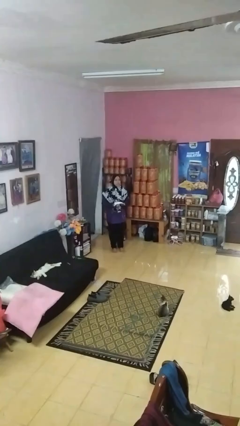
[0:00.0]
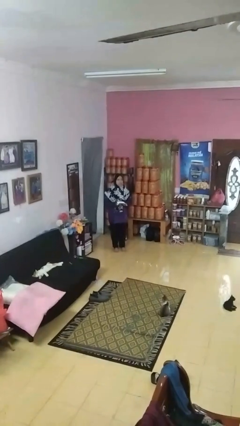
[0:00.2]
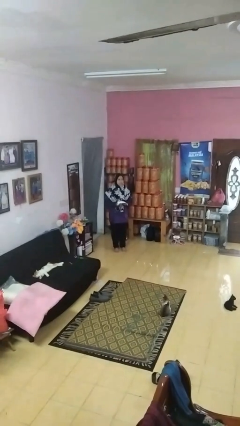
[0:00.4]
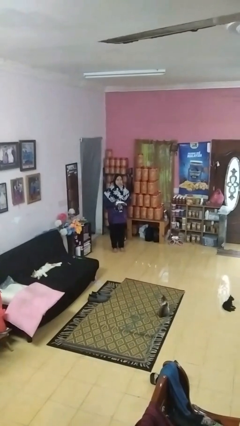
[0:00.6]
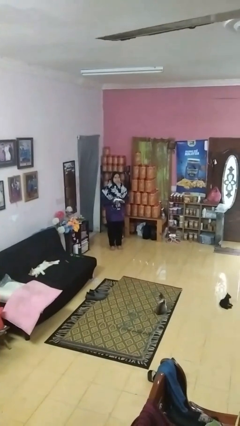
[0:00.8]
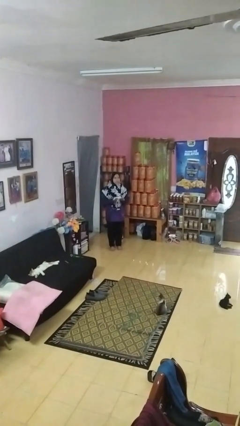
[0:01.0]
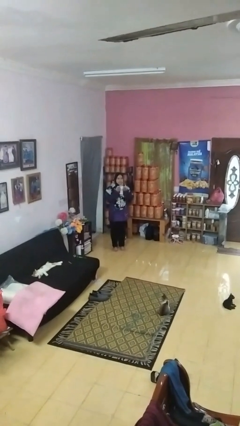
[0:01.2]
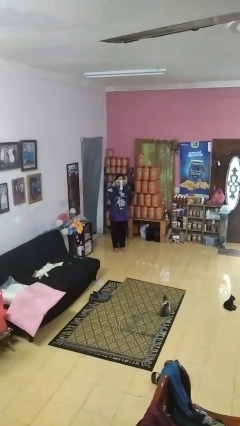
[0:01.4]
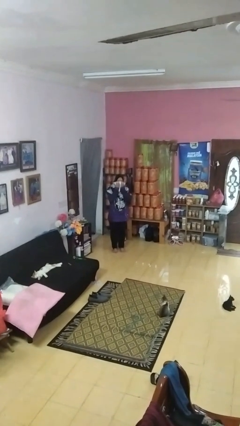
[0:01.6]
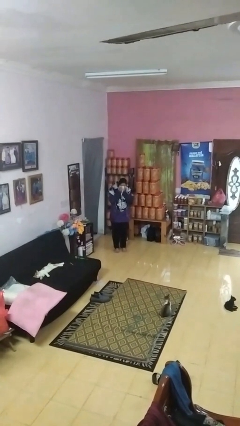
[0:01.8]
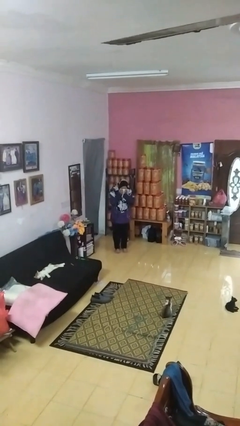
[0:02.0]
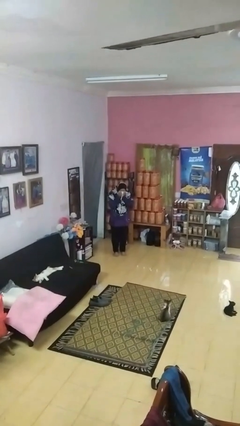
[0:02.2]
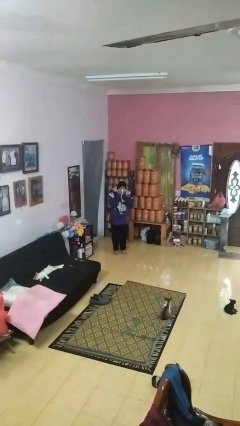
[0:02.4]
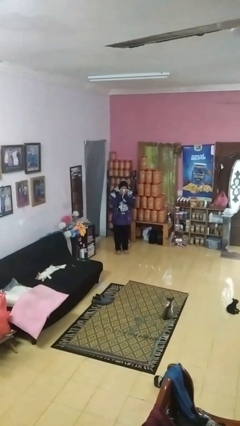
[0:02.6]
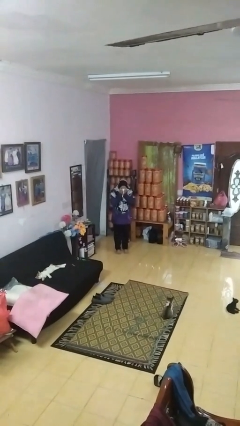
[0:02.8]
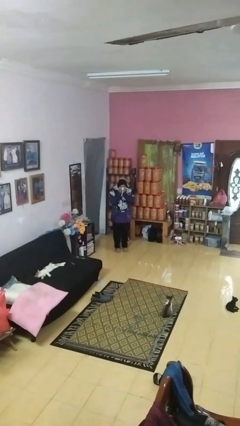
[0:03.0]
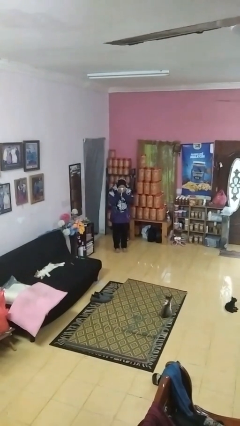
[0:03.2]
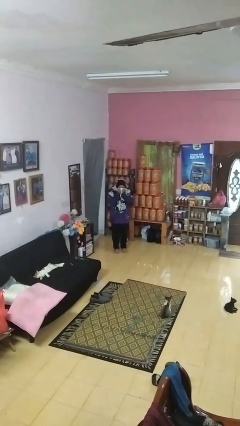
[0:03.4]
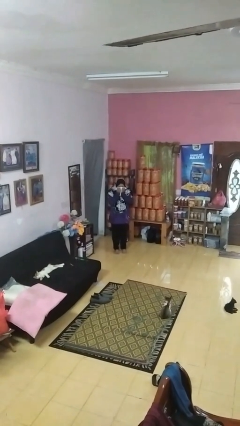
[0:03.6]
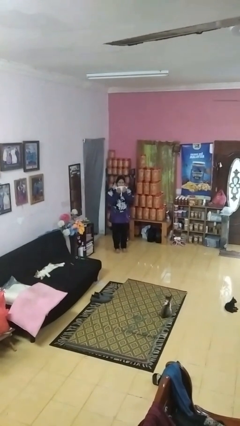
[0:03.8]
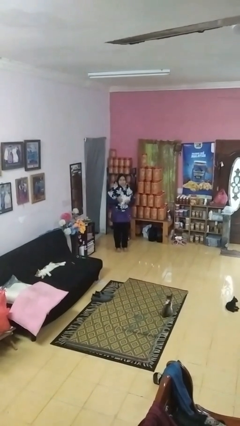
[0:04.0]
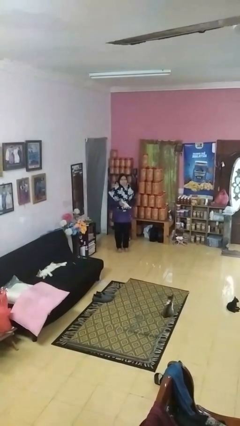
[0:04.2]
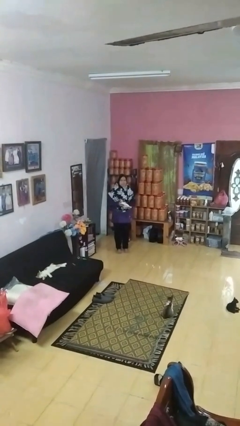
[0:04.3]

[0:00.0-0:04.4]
person blows nose

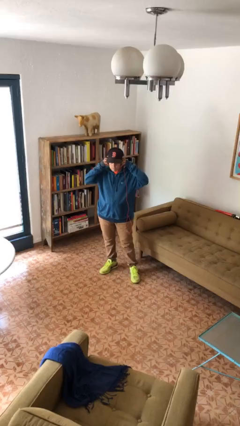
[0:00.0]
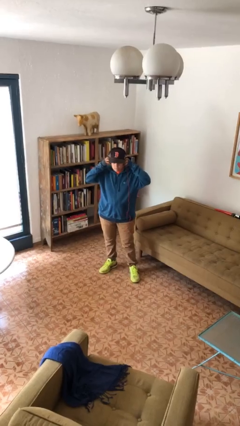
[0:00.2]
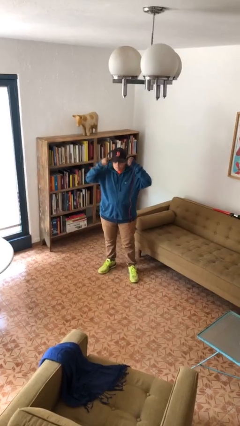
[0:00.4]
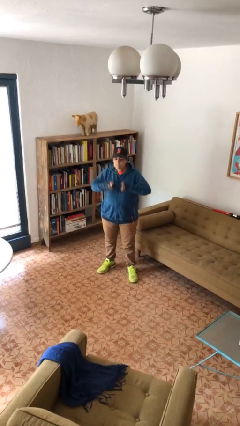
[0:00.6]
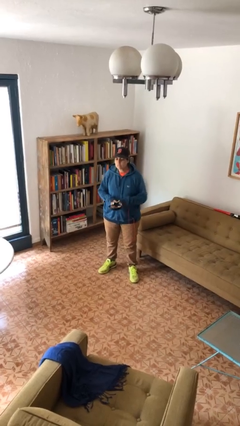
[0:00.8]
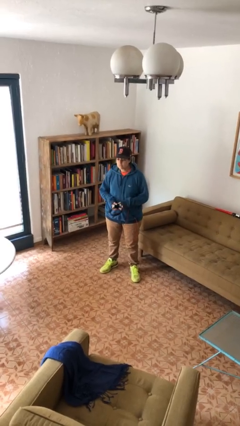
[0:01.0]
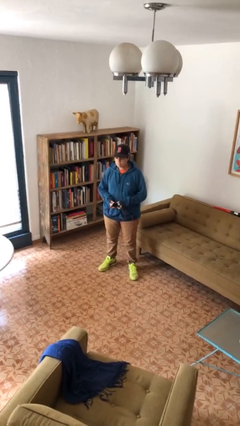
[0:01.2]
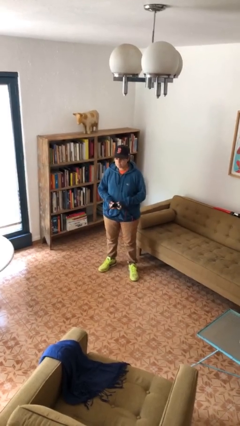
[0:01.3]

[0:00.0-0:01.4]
person takes off headphones

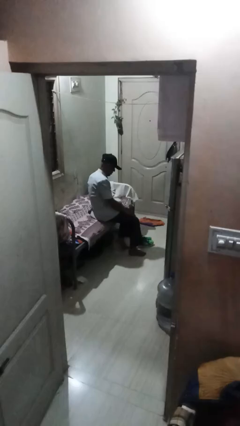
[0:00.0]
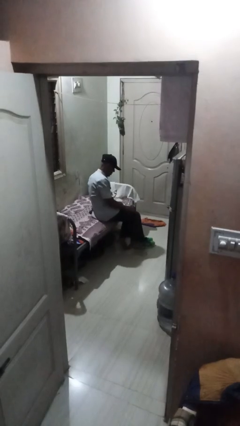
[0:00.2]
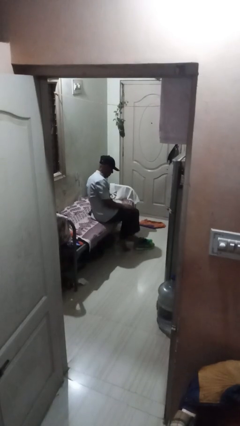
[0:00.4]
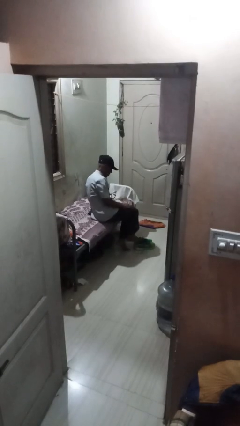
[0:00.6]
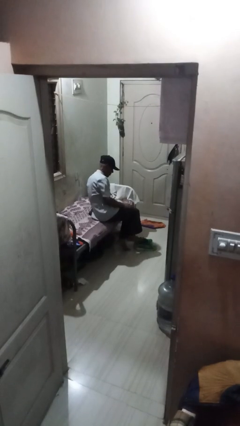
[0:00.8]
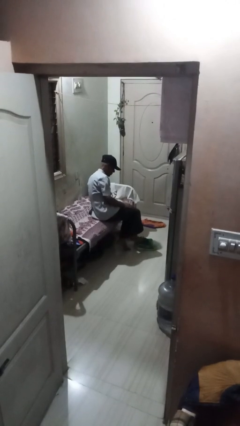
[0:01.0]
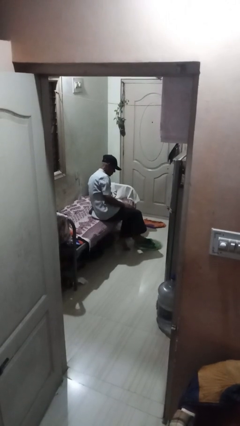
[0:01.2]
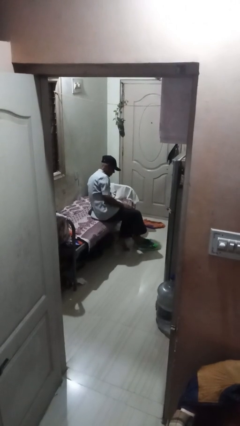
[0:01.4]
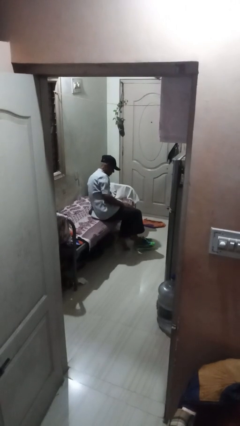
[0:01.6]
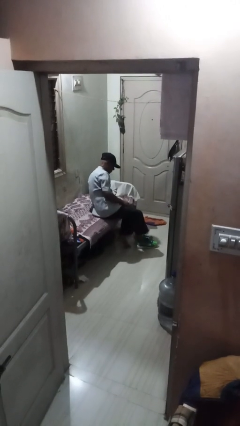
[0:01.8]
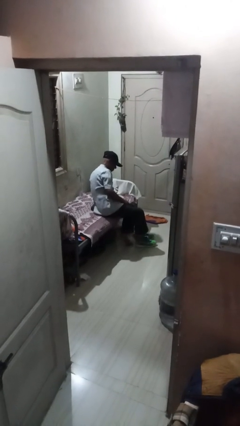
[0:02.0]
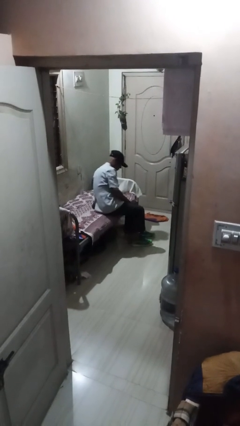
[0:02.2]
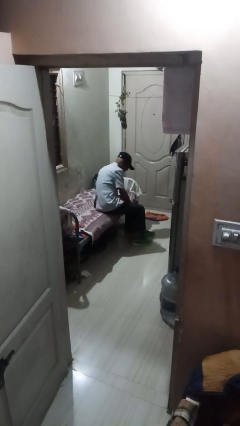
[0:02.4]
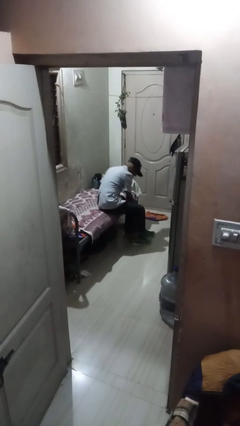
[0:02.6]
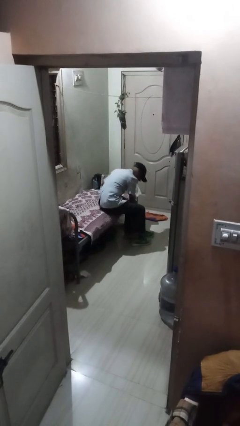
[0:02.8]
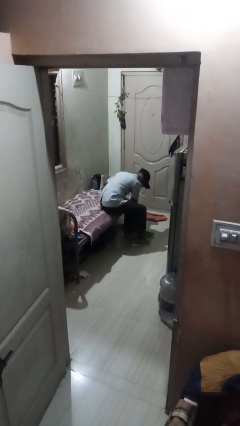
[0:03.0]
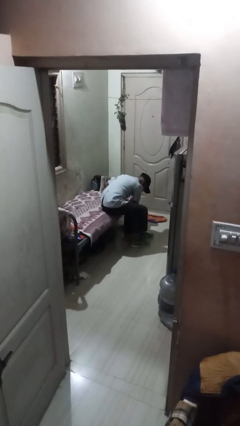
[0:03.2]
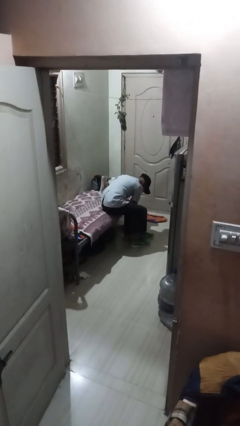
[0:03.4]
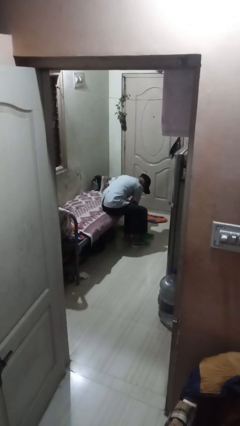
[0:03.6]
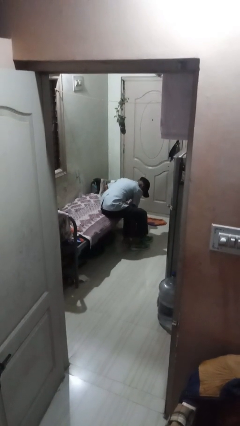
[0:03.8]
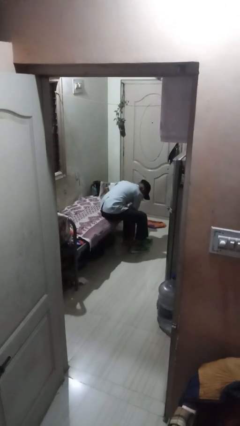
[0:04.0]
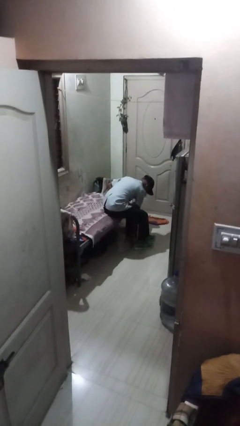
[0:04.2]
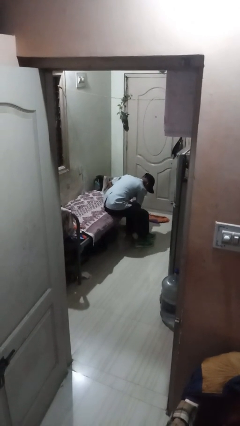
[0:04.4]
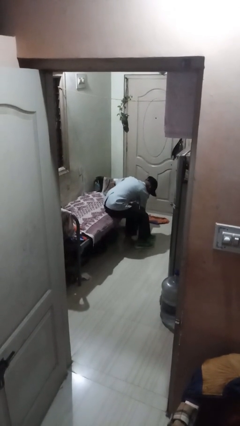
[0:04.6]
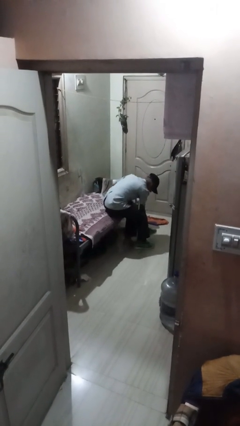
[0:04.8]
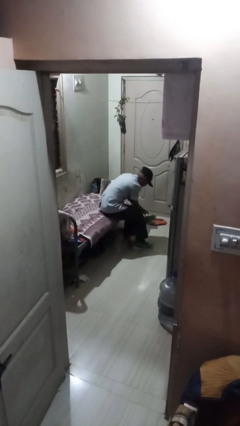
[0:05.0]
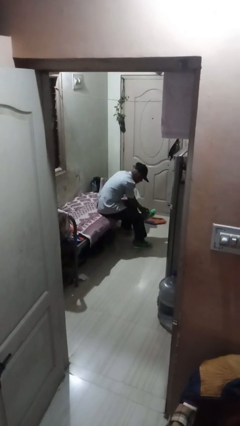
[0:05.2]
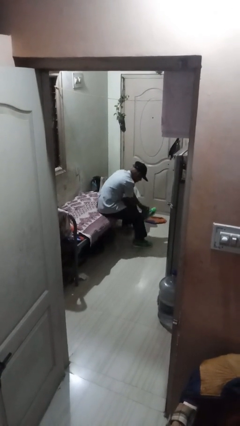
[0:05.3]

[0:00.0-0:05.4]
person puts on shoes

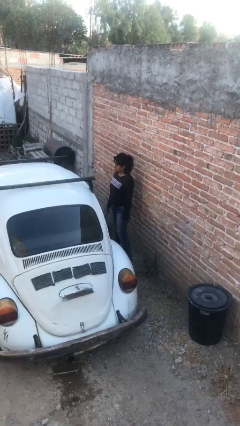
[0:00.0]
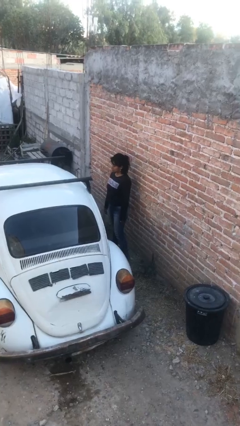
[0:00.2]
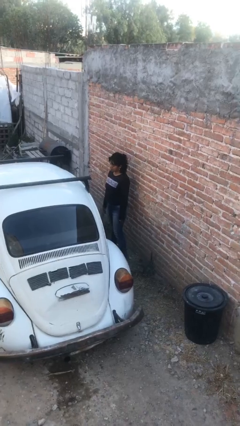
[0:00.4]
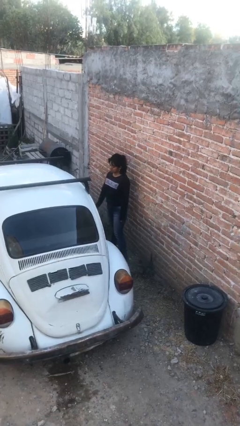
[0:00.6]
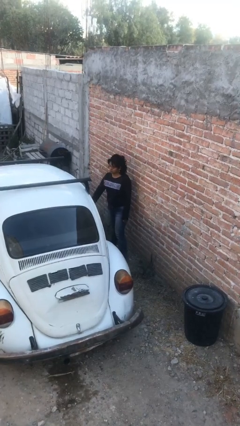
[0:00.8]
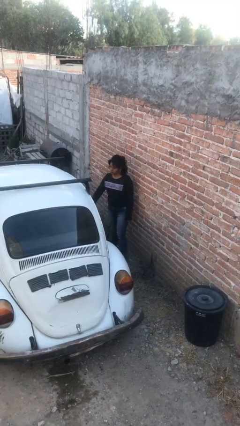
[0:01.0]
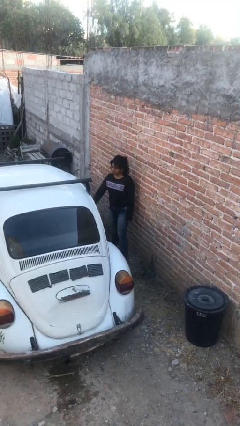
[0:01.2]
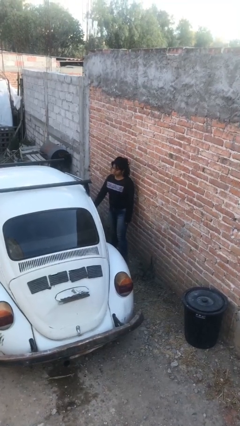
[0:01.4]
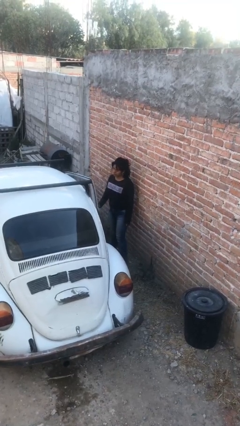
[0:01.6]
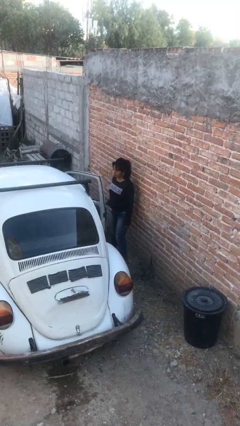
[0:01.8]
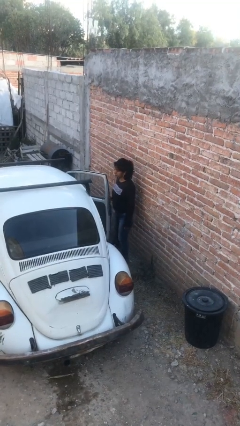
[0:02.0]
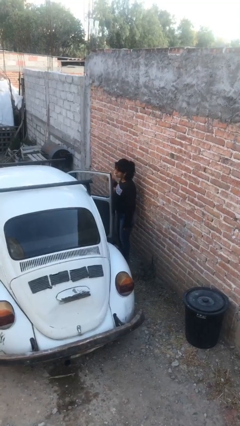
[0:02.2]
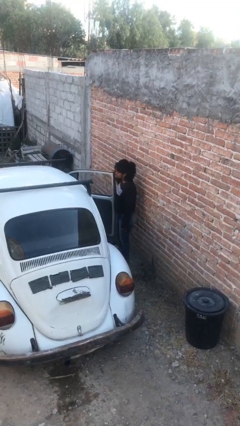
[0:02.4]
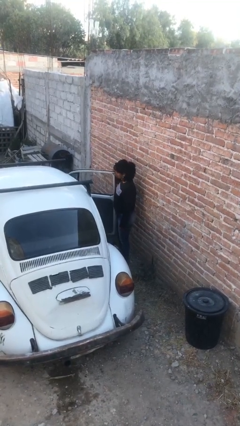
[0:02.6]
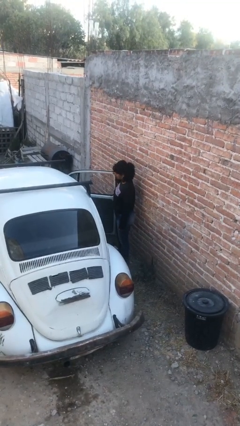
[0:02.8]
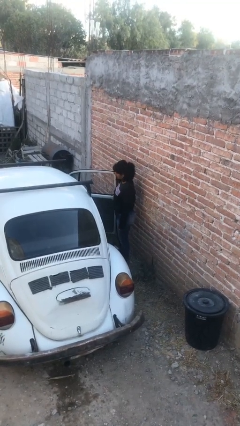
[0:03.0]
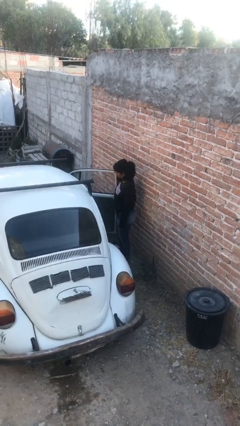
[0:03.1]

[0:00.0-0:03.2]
person opens car door

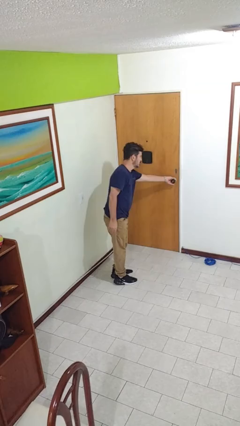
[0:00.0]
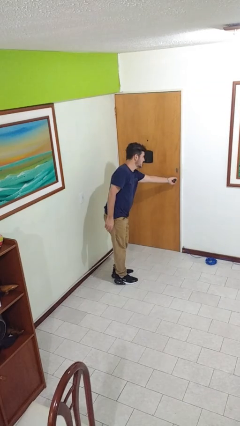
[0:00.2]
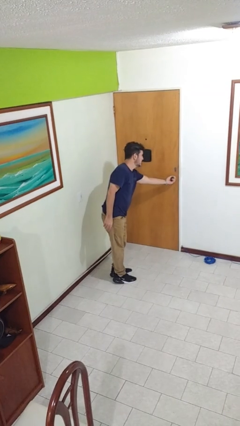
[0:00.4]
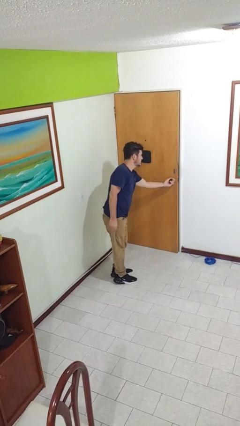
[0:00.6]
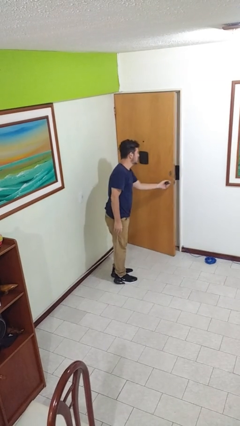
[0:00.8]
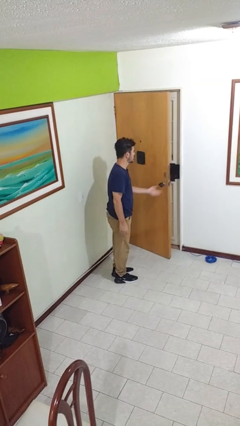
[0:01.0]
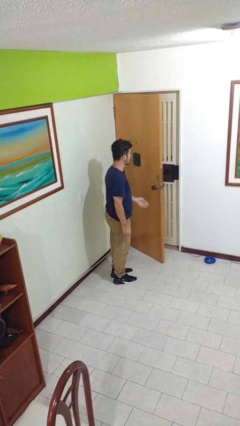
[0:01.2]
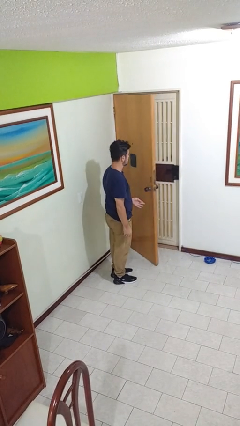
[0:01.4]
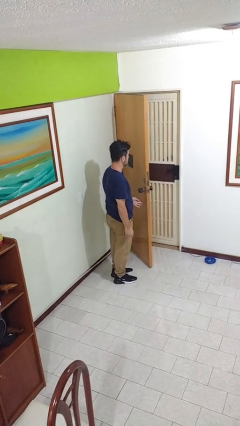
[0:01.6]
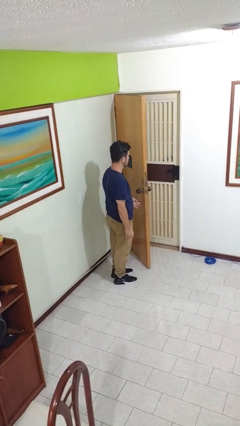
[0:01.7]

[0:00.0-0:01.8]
person opens facility door

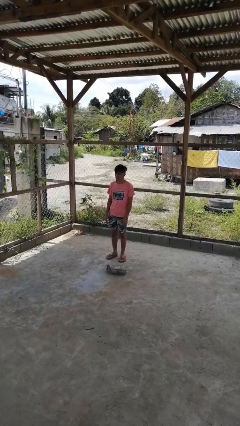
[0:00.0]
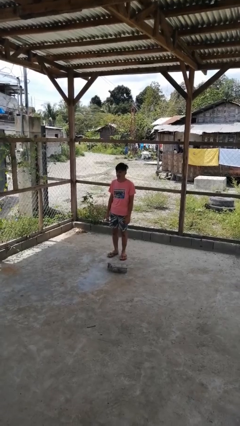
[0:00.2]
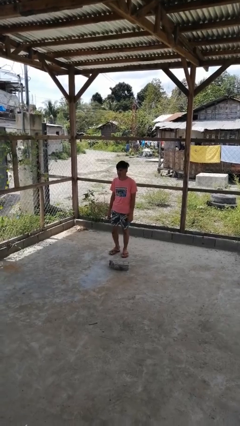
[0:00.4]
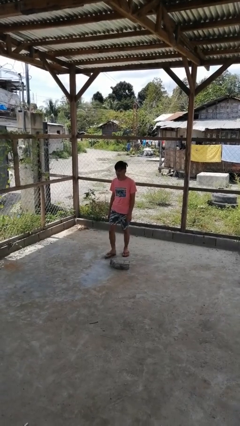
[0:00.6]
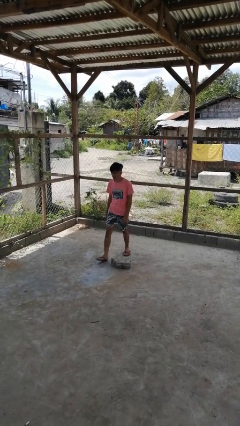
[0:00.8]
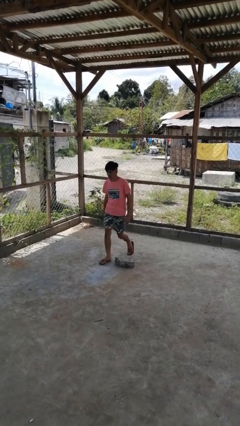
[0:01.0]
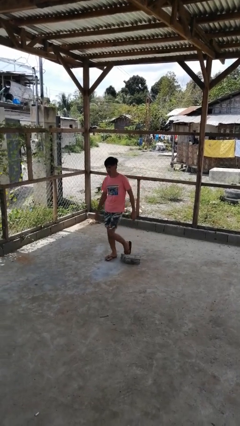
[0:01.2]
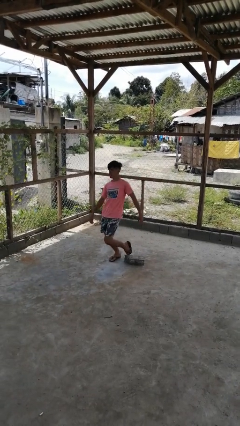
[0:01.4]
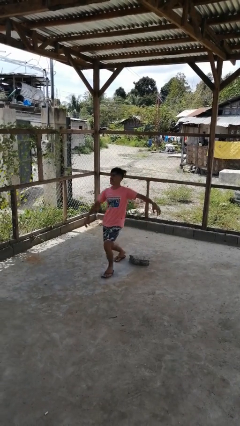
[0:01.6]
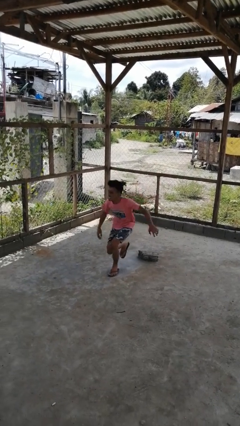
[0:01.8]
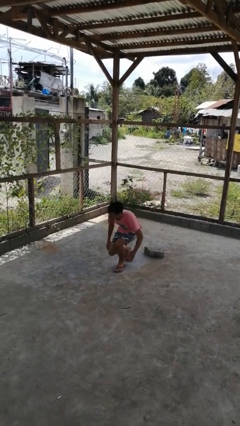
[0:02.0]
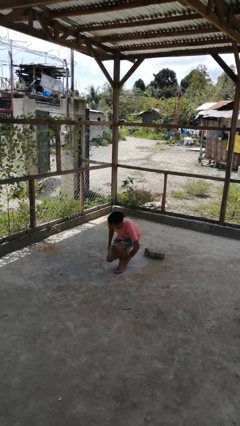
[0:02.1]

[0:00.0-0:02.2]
person trips on object on floor
